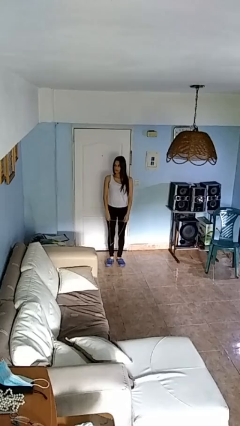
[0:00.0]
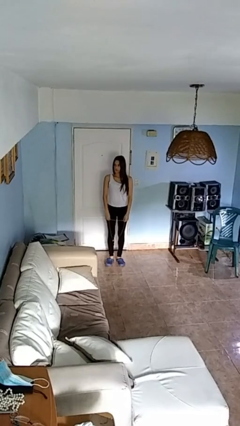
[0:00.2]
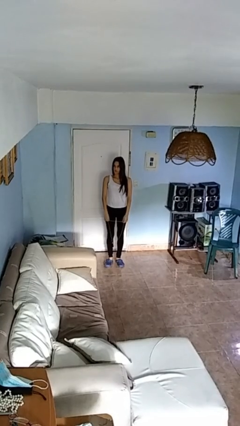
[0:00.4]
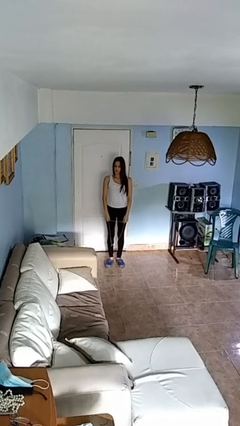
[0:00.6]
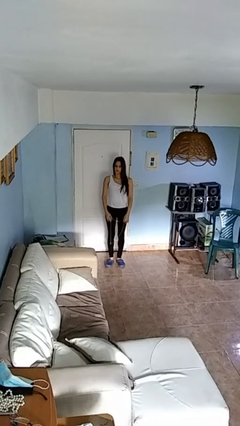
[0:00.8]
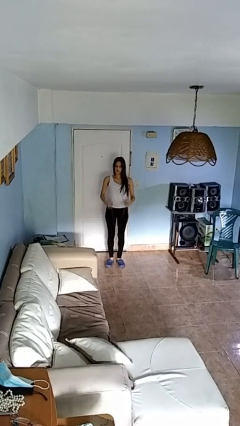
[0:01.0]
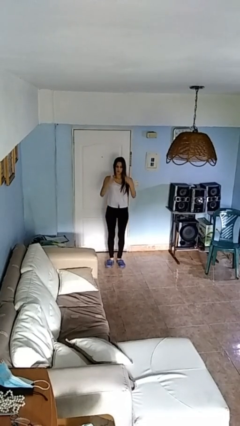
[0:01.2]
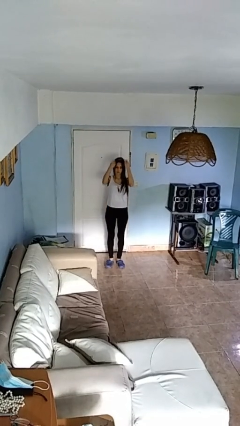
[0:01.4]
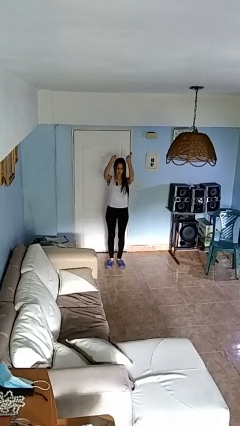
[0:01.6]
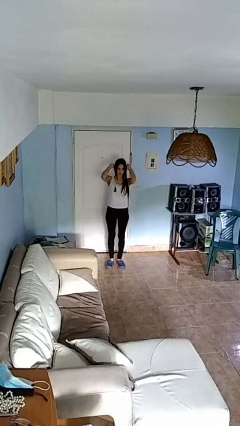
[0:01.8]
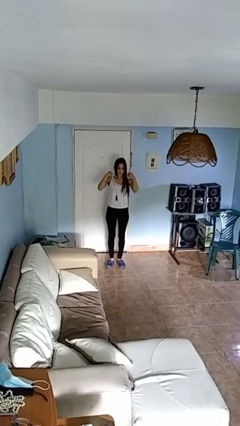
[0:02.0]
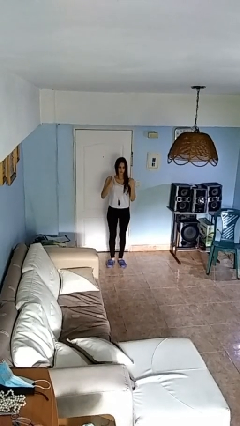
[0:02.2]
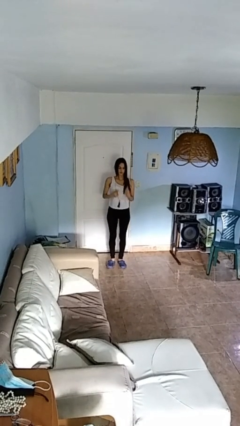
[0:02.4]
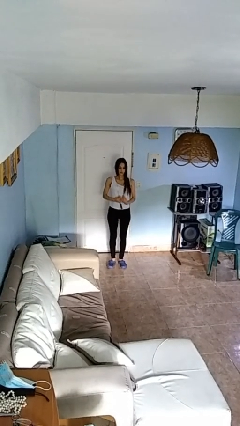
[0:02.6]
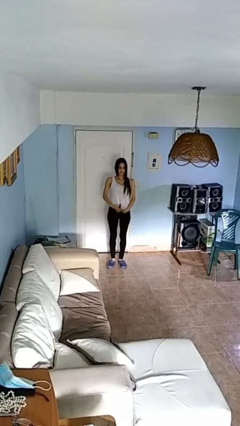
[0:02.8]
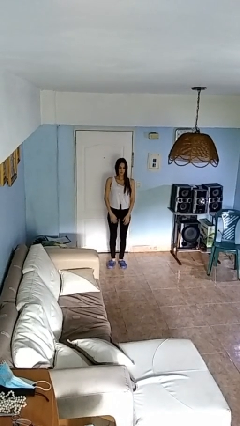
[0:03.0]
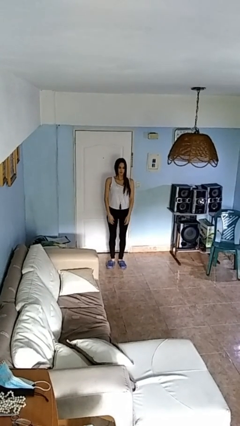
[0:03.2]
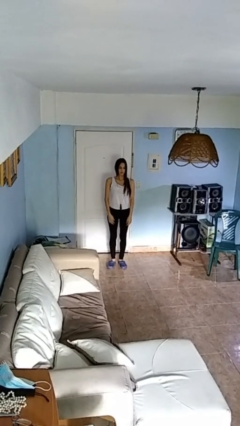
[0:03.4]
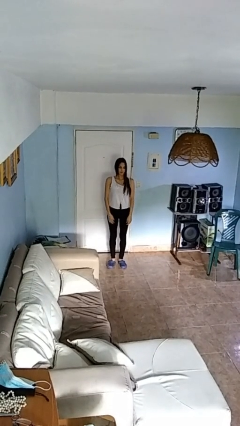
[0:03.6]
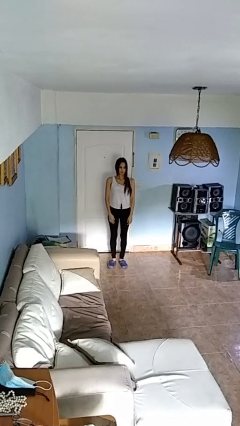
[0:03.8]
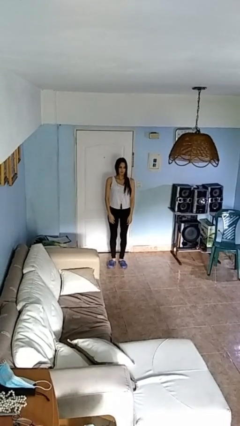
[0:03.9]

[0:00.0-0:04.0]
person puts on necklace

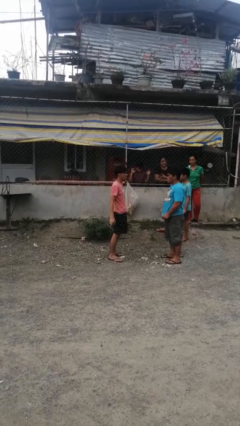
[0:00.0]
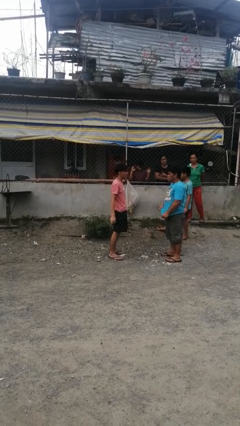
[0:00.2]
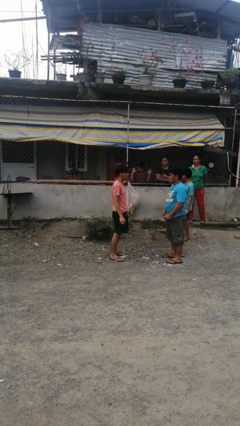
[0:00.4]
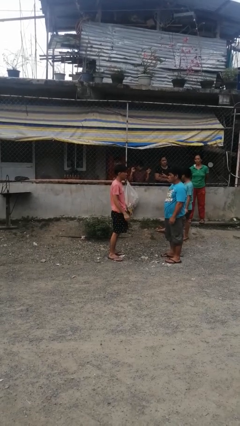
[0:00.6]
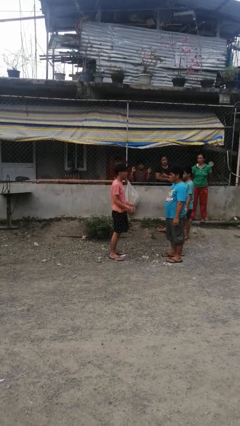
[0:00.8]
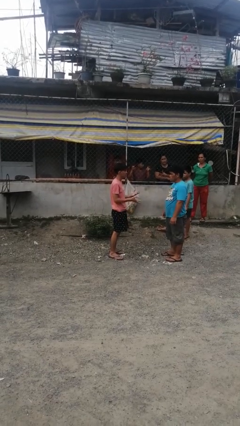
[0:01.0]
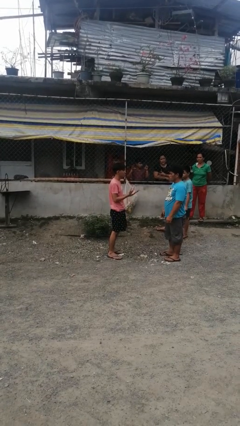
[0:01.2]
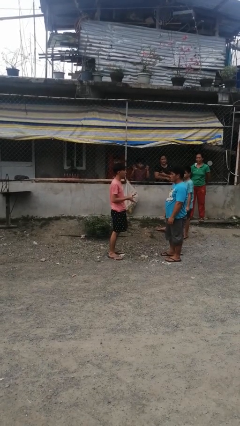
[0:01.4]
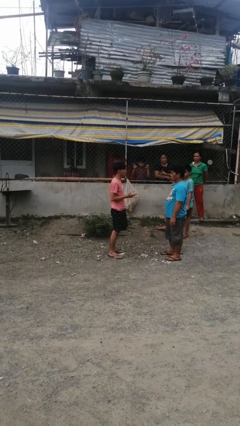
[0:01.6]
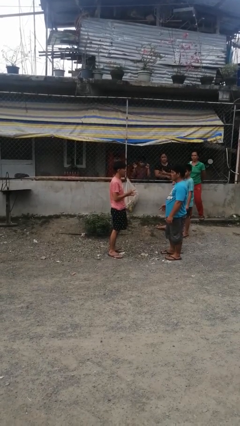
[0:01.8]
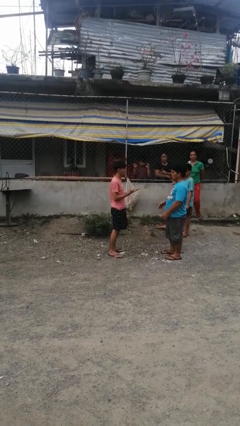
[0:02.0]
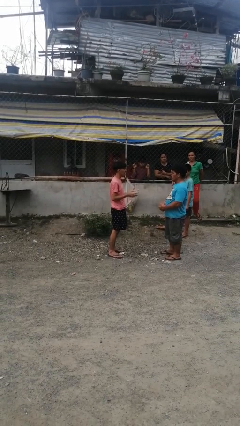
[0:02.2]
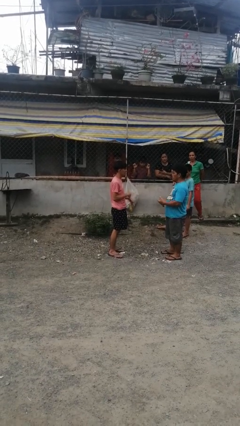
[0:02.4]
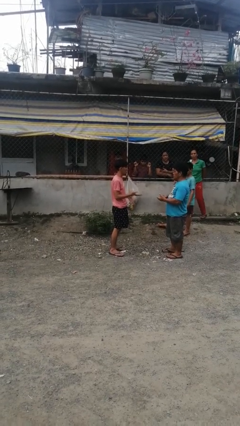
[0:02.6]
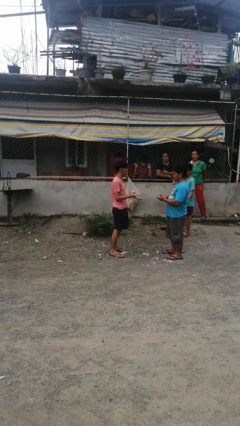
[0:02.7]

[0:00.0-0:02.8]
person talks to person

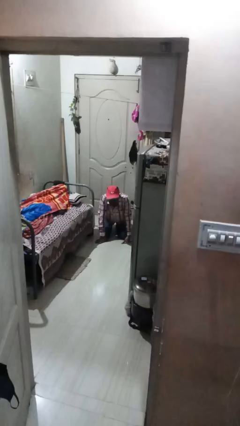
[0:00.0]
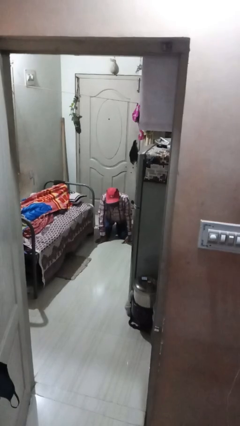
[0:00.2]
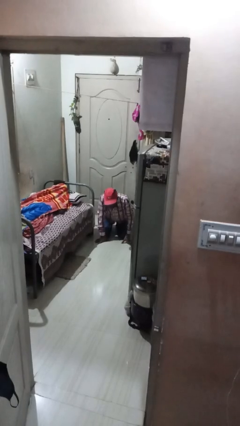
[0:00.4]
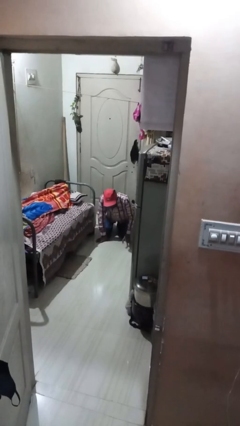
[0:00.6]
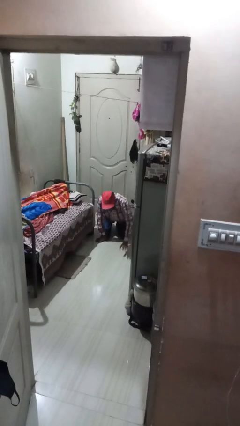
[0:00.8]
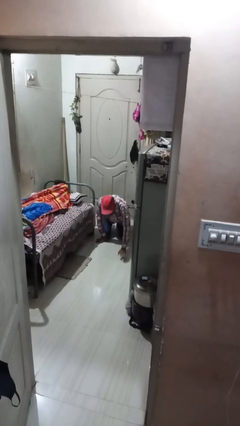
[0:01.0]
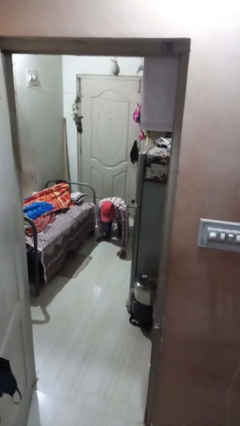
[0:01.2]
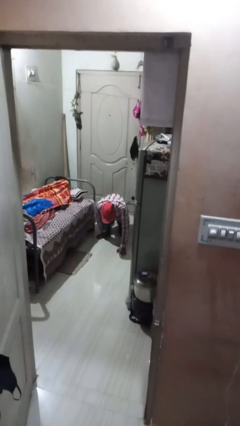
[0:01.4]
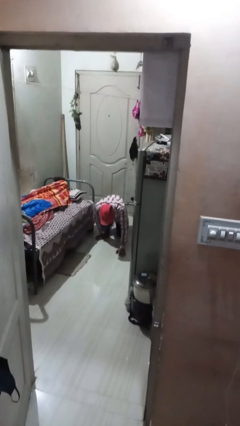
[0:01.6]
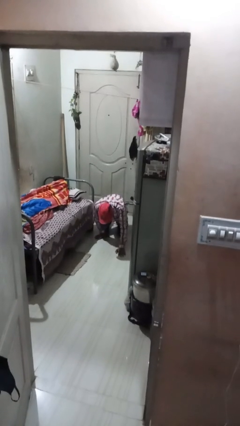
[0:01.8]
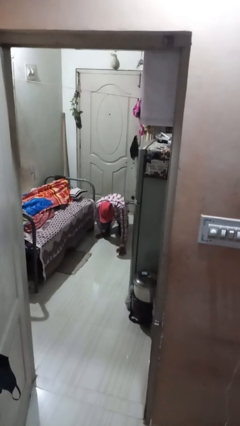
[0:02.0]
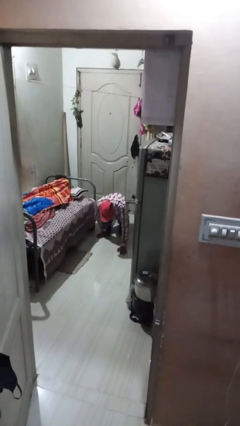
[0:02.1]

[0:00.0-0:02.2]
person crawls

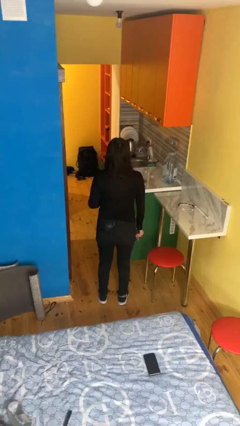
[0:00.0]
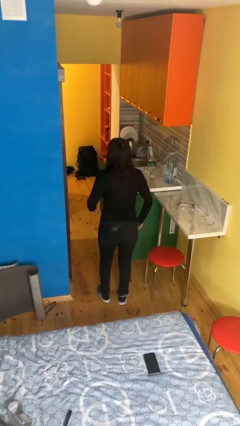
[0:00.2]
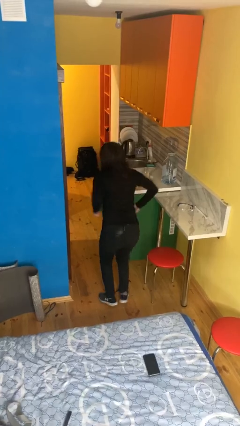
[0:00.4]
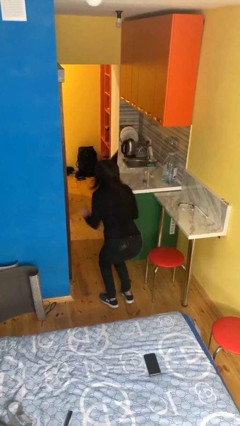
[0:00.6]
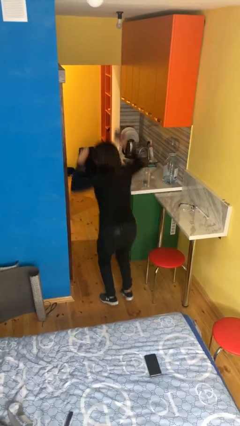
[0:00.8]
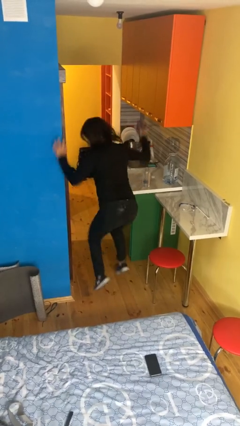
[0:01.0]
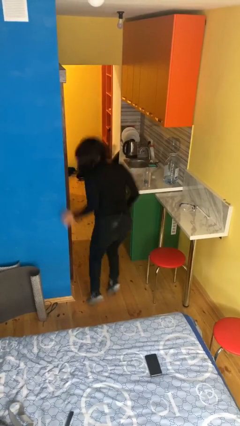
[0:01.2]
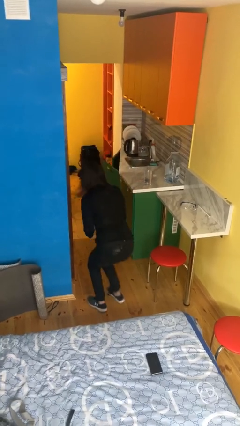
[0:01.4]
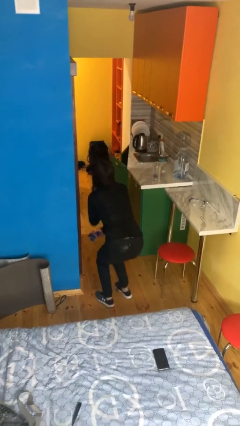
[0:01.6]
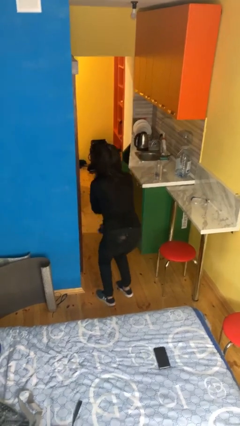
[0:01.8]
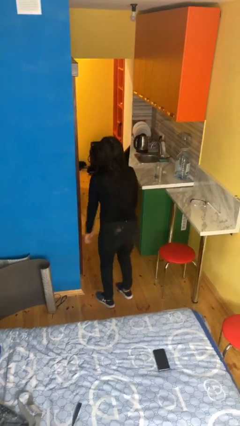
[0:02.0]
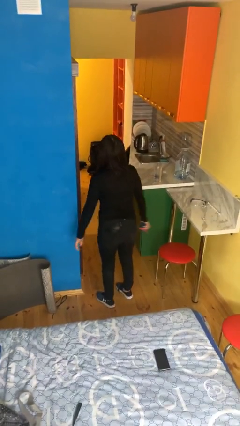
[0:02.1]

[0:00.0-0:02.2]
person jumps

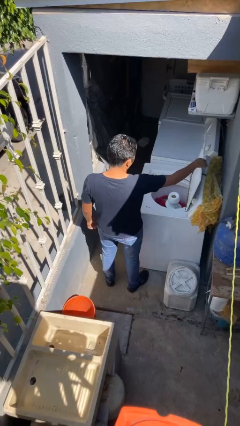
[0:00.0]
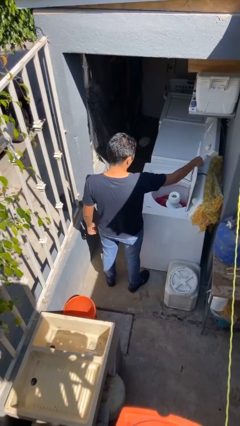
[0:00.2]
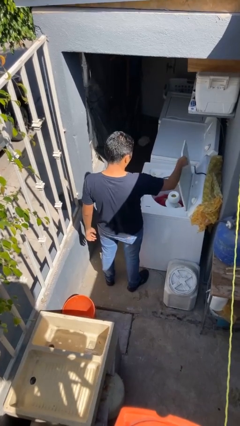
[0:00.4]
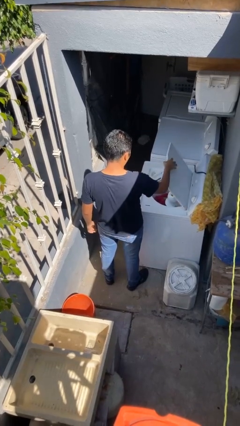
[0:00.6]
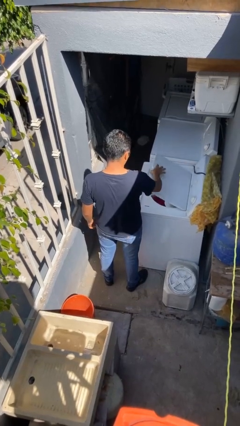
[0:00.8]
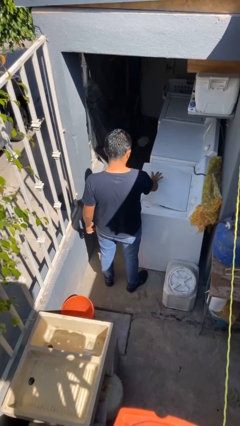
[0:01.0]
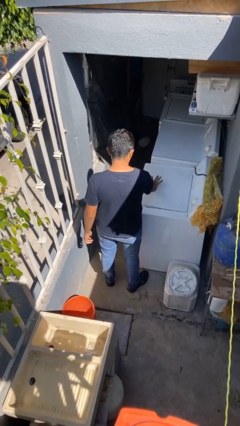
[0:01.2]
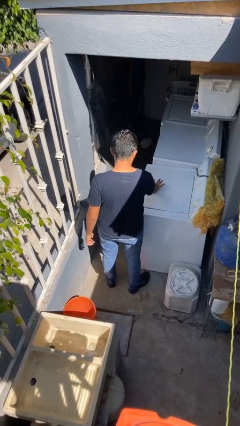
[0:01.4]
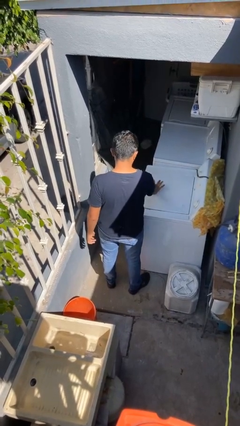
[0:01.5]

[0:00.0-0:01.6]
person closes clothes washer

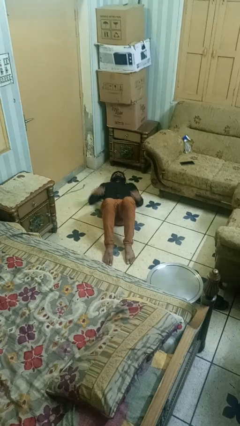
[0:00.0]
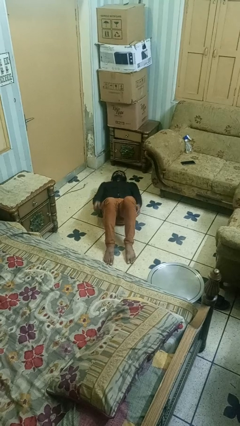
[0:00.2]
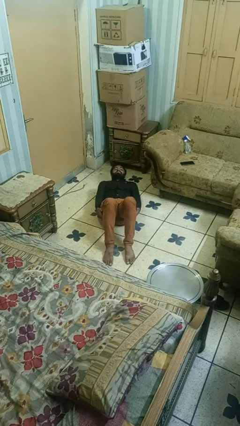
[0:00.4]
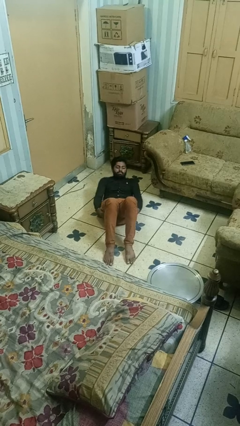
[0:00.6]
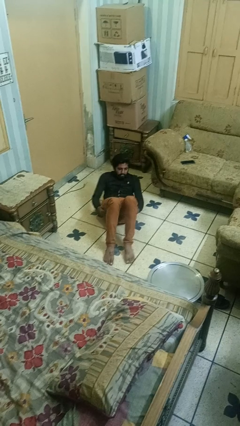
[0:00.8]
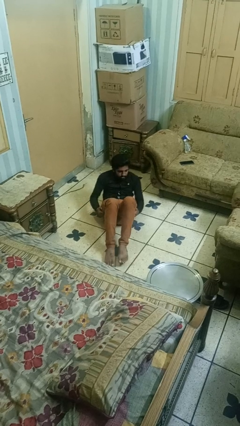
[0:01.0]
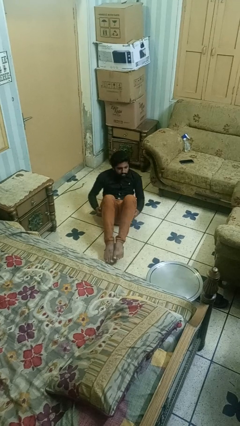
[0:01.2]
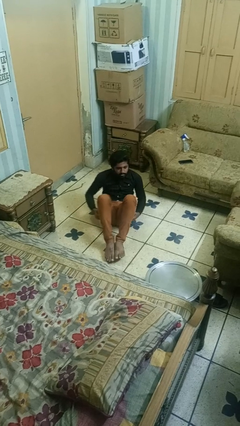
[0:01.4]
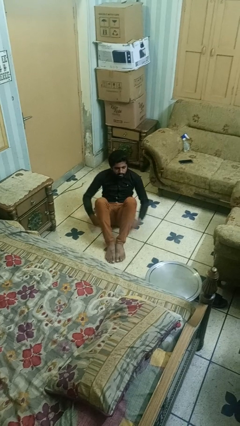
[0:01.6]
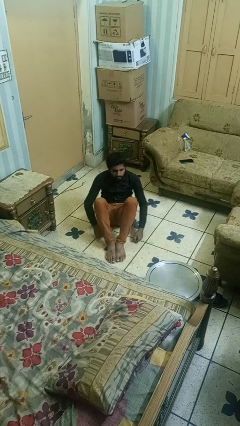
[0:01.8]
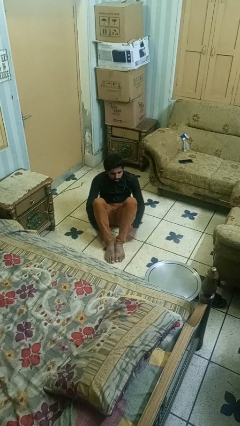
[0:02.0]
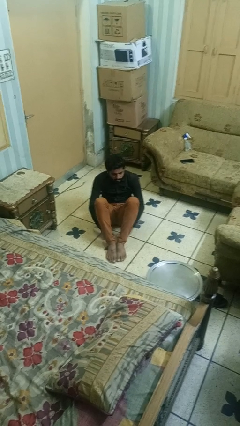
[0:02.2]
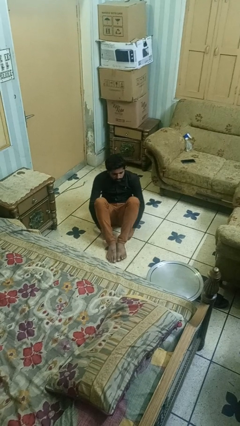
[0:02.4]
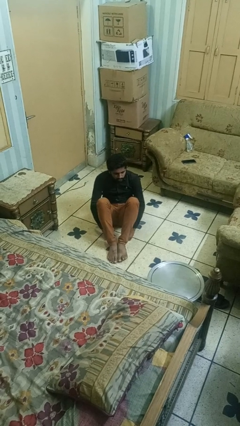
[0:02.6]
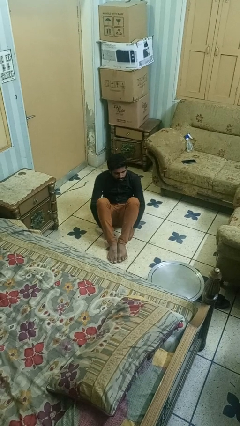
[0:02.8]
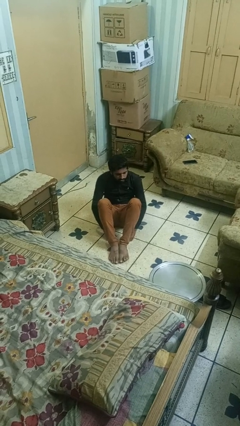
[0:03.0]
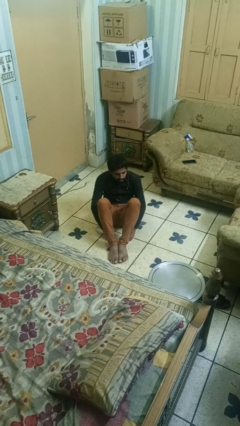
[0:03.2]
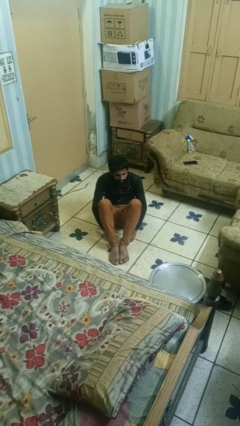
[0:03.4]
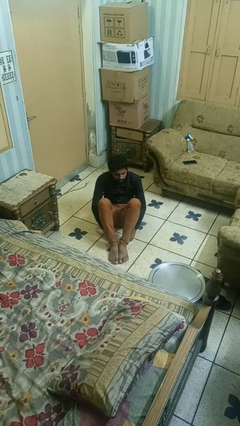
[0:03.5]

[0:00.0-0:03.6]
person exercises with situp

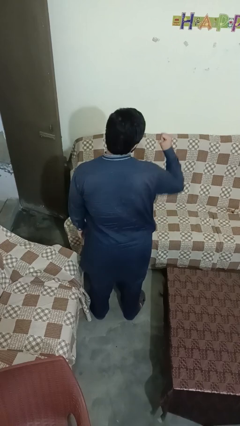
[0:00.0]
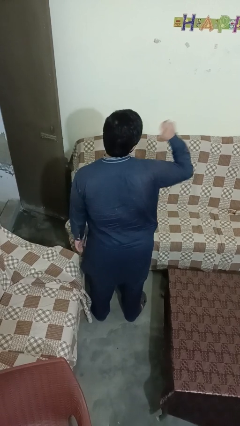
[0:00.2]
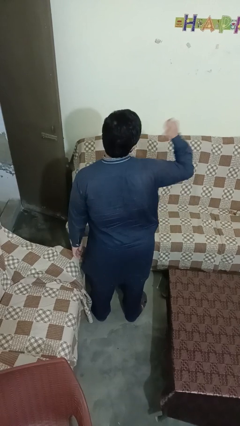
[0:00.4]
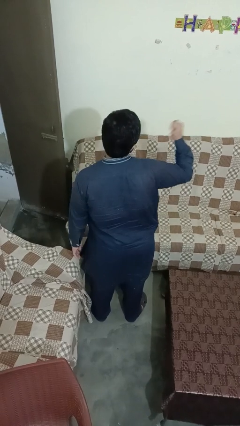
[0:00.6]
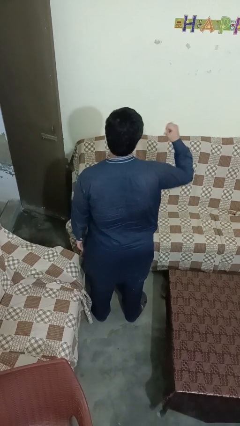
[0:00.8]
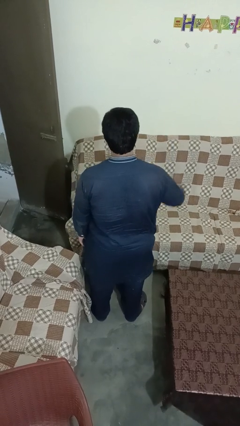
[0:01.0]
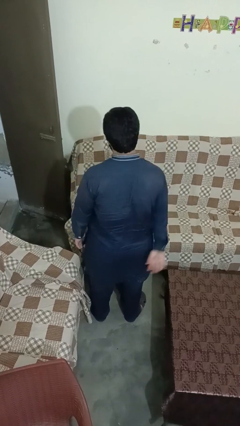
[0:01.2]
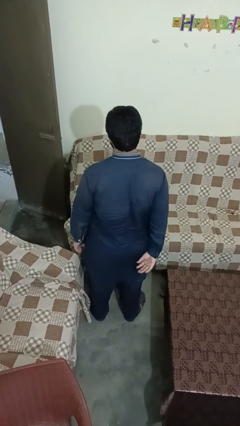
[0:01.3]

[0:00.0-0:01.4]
person gestures behind me
